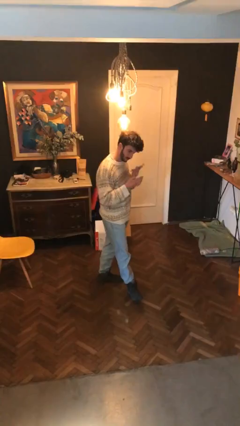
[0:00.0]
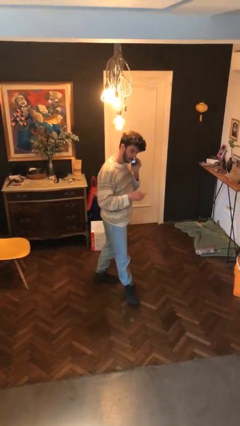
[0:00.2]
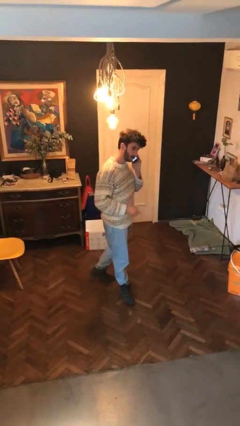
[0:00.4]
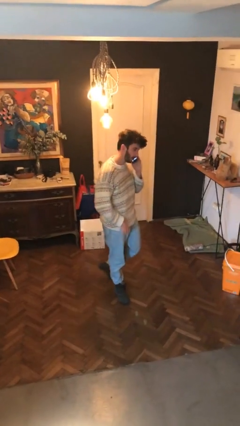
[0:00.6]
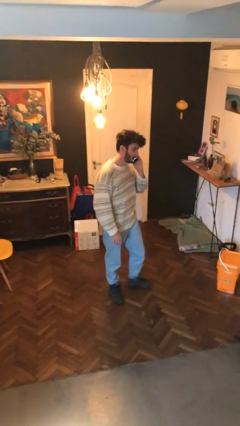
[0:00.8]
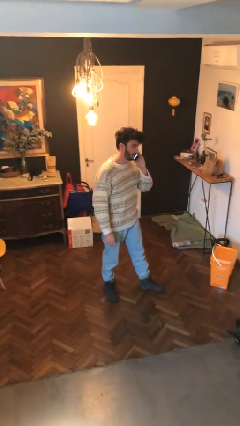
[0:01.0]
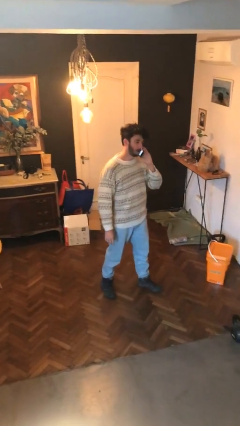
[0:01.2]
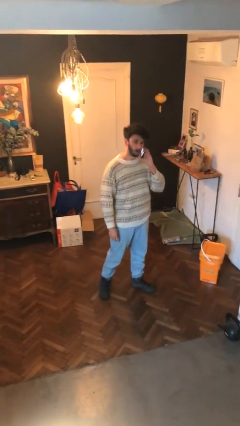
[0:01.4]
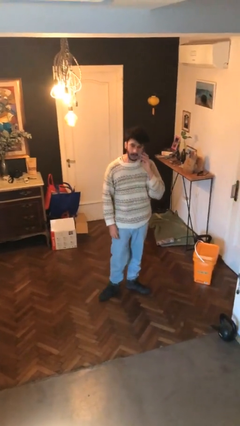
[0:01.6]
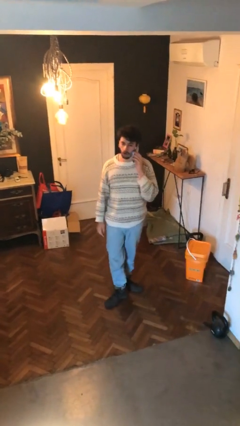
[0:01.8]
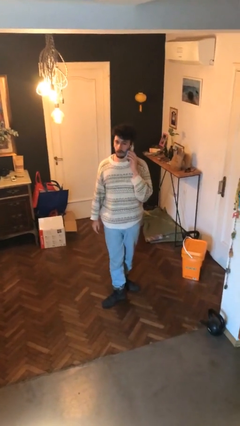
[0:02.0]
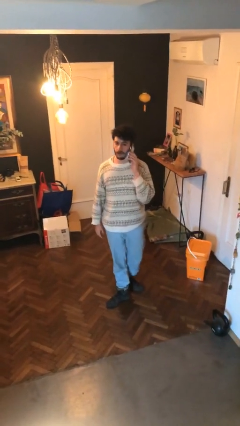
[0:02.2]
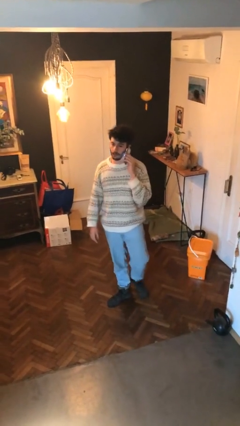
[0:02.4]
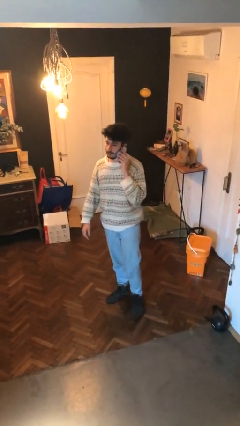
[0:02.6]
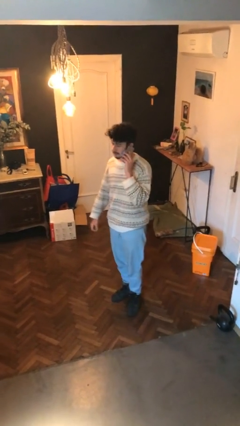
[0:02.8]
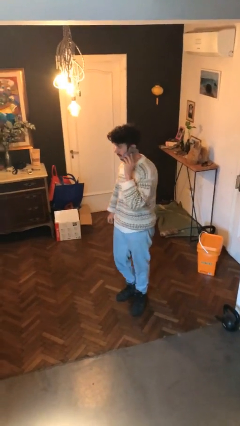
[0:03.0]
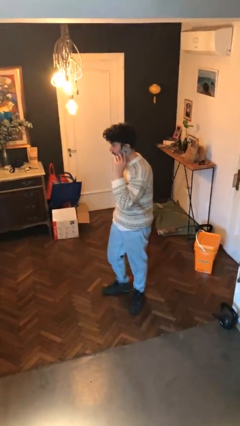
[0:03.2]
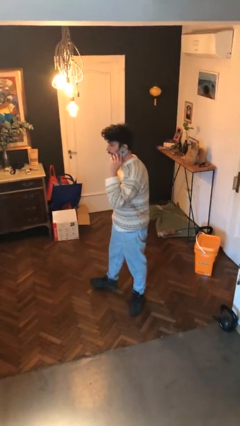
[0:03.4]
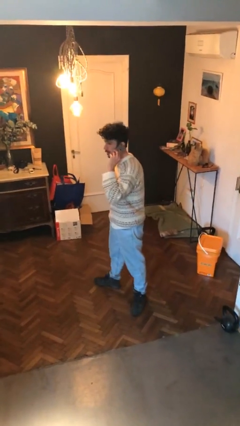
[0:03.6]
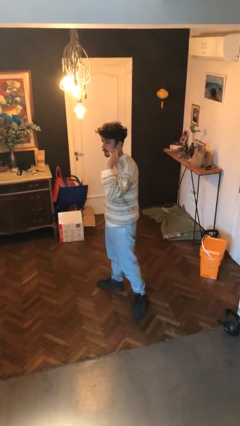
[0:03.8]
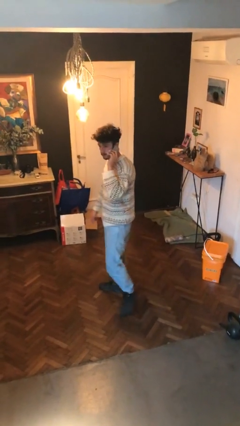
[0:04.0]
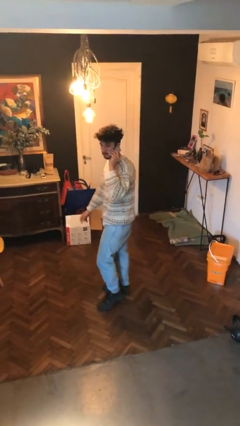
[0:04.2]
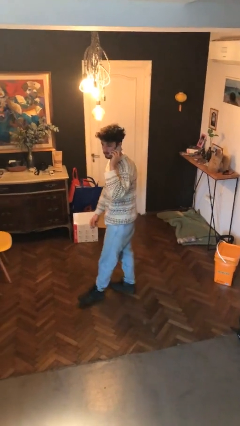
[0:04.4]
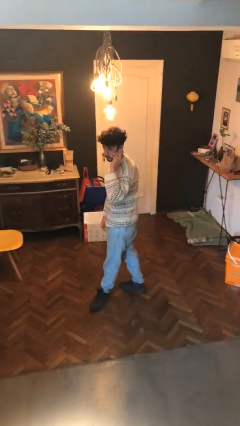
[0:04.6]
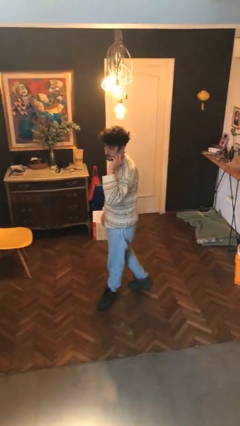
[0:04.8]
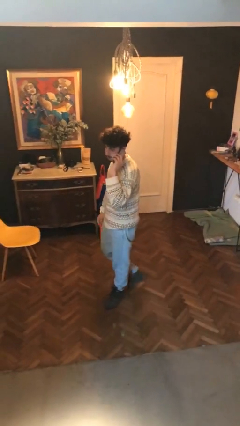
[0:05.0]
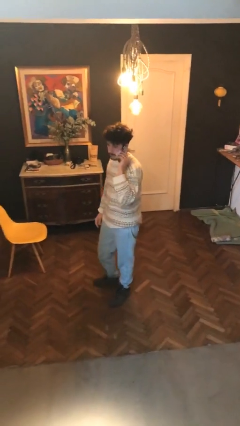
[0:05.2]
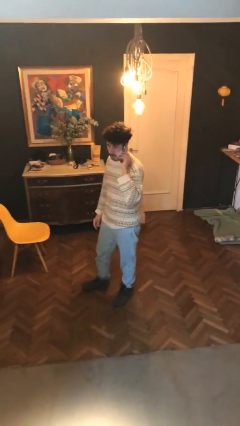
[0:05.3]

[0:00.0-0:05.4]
person talks on phone

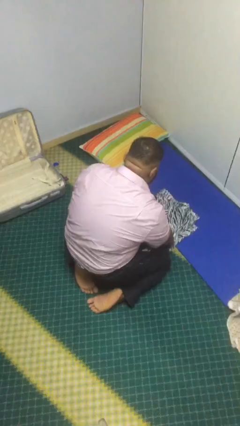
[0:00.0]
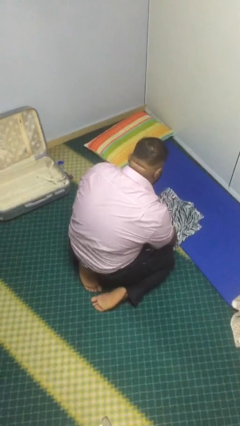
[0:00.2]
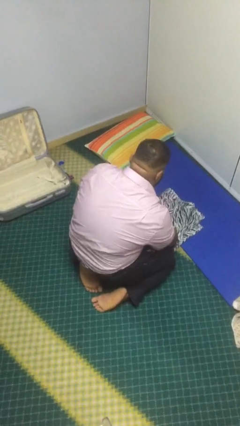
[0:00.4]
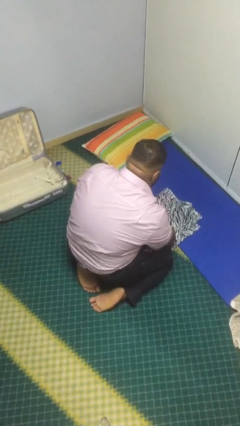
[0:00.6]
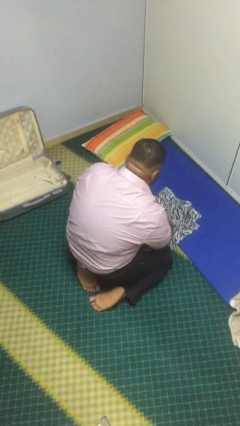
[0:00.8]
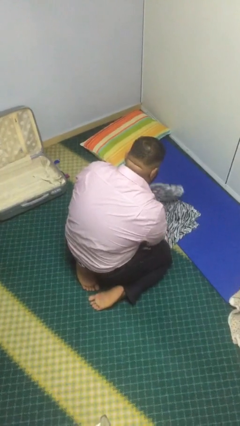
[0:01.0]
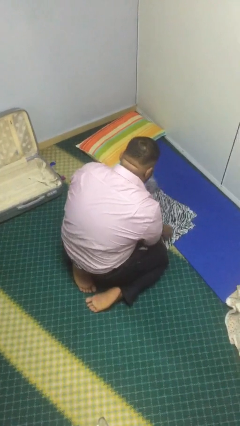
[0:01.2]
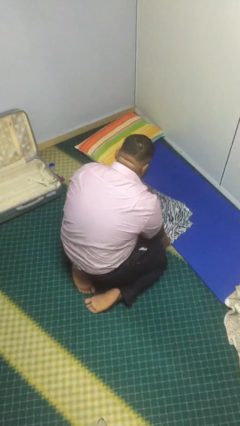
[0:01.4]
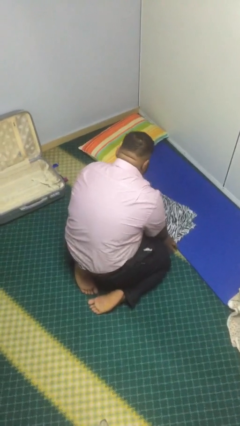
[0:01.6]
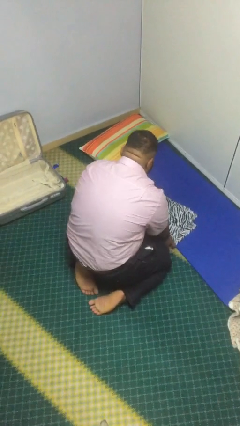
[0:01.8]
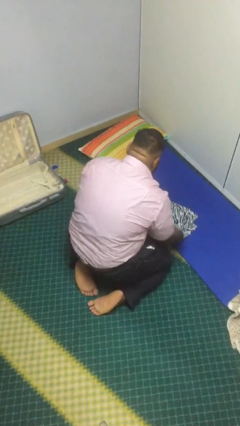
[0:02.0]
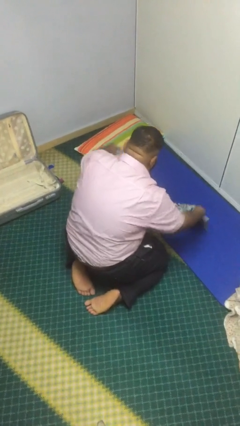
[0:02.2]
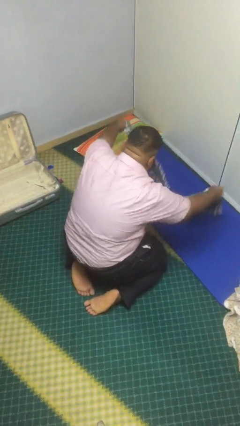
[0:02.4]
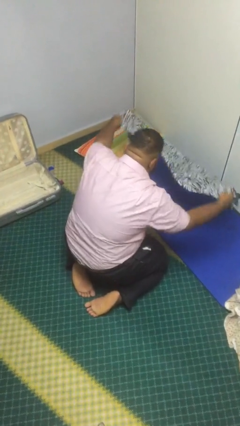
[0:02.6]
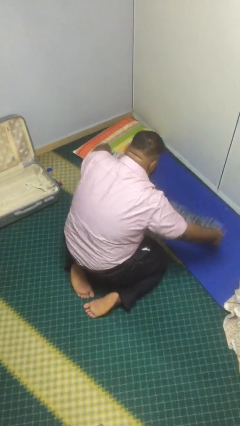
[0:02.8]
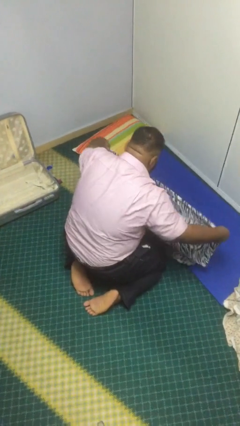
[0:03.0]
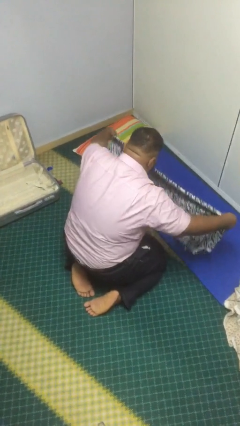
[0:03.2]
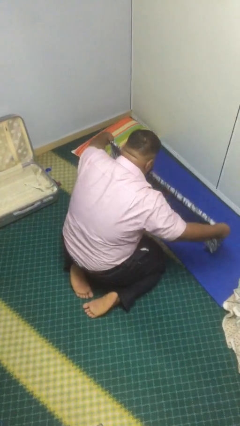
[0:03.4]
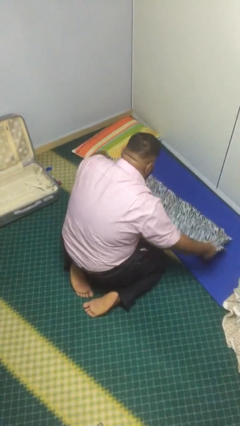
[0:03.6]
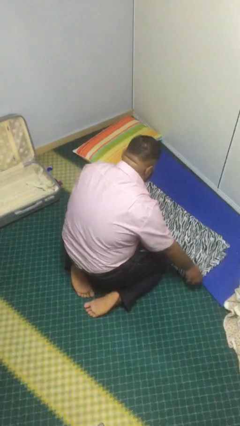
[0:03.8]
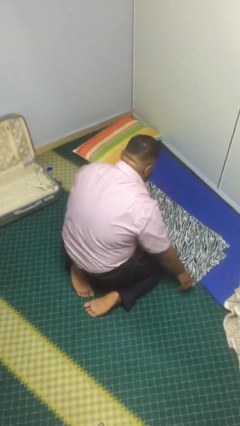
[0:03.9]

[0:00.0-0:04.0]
person unfolds blanket

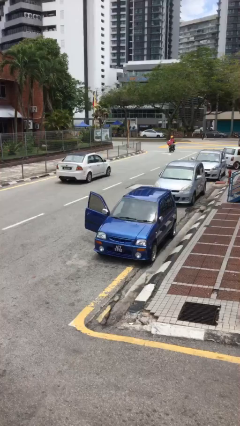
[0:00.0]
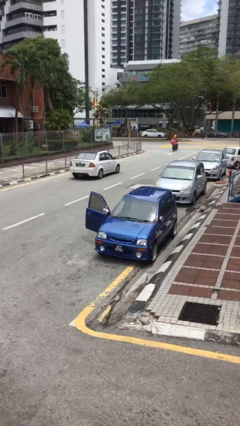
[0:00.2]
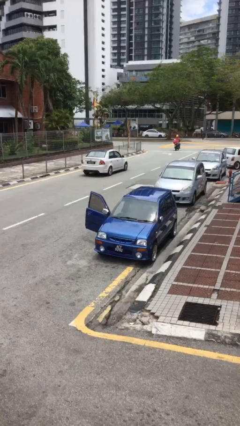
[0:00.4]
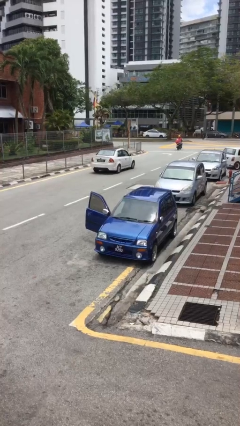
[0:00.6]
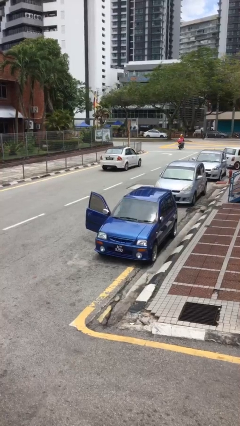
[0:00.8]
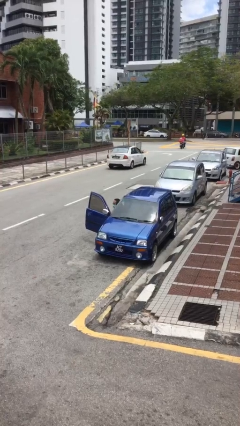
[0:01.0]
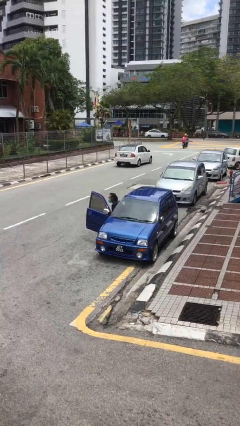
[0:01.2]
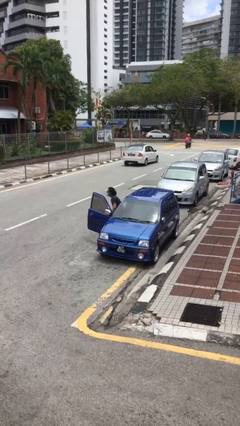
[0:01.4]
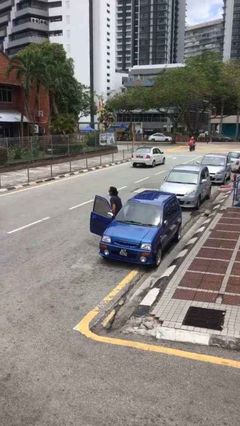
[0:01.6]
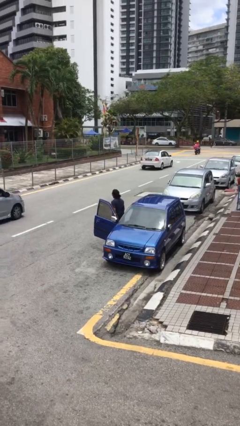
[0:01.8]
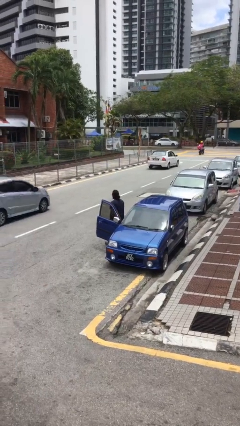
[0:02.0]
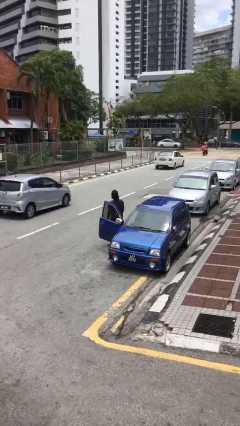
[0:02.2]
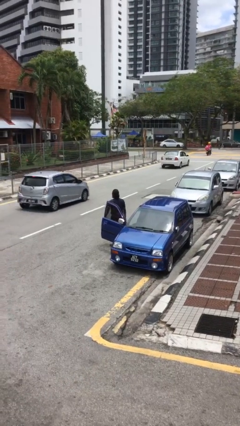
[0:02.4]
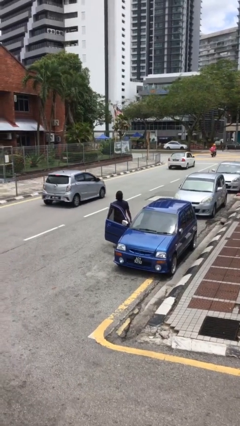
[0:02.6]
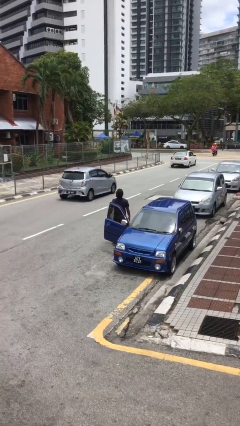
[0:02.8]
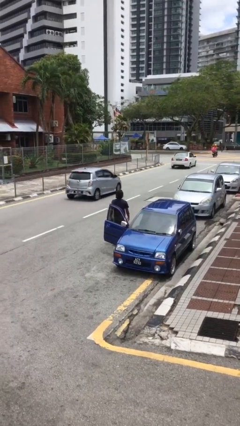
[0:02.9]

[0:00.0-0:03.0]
person exits car

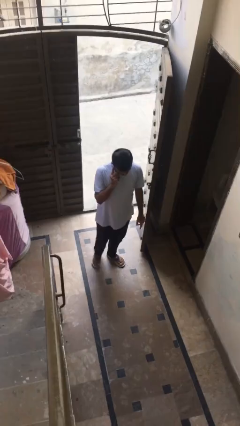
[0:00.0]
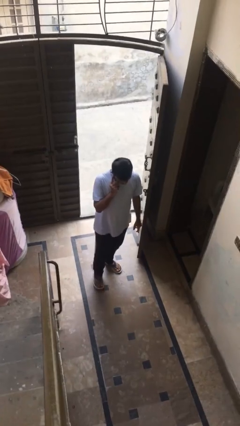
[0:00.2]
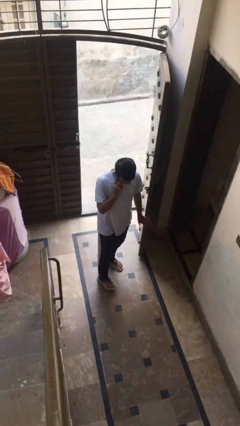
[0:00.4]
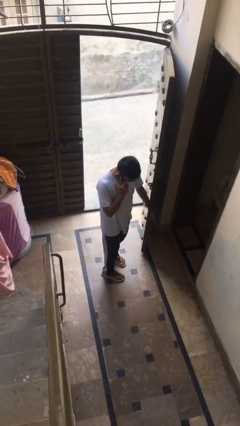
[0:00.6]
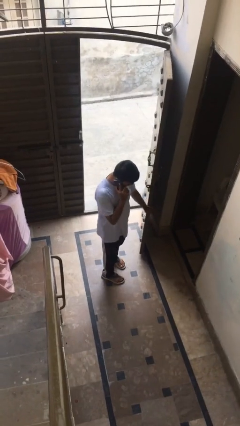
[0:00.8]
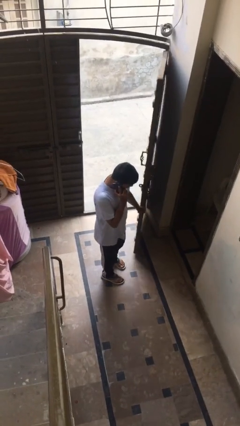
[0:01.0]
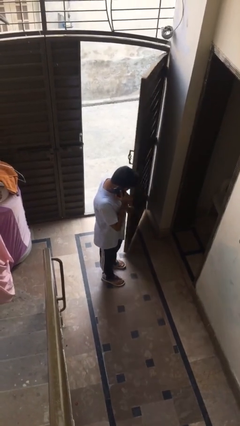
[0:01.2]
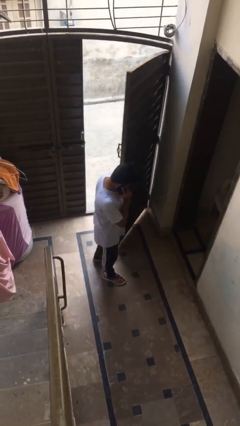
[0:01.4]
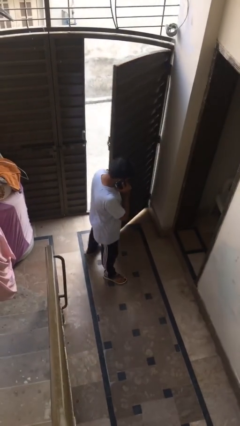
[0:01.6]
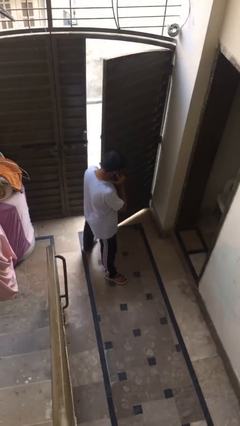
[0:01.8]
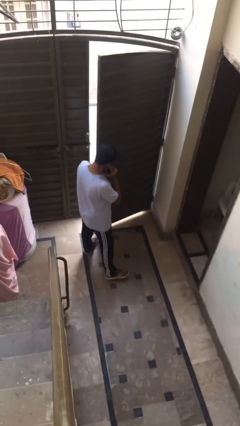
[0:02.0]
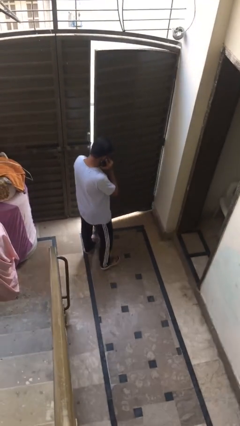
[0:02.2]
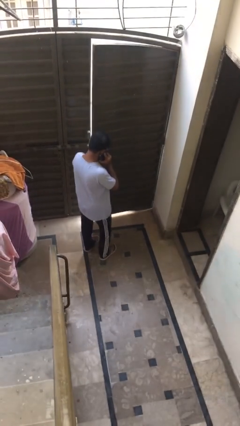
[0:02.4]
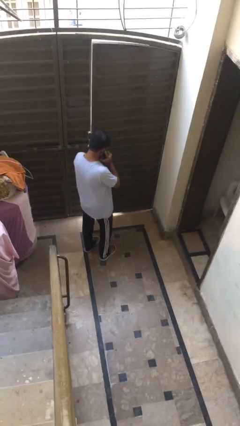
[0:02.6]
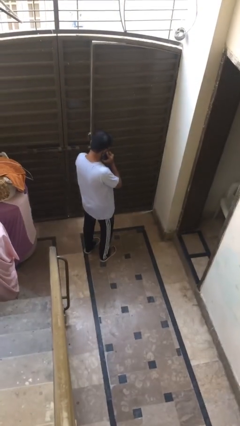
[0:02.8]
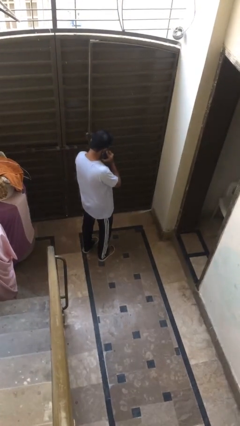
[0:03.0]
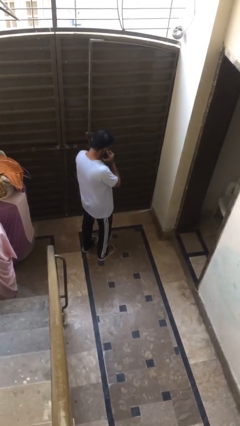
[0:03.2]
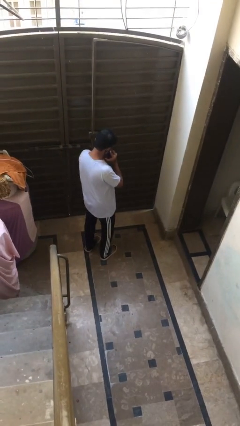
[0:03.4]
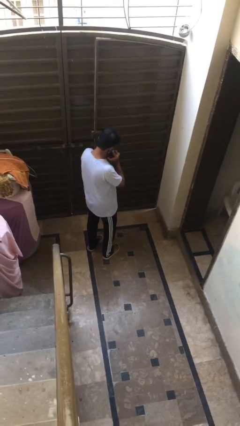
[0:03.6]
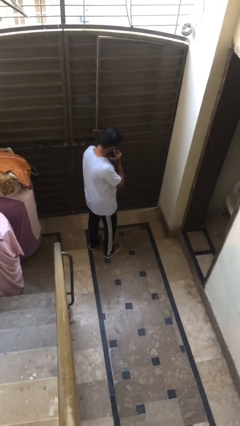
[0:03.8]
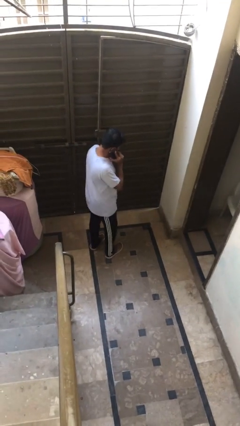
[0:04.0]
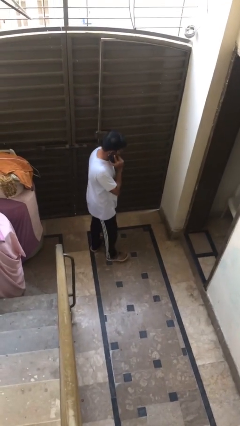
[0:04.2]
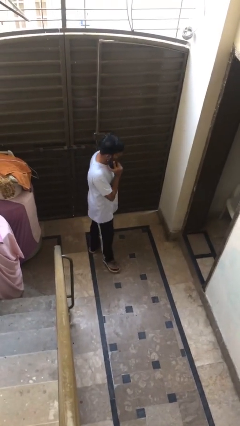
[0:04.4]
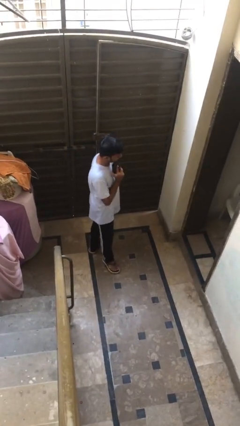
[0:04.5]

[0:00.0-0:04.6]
person closes facility door

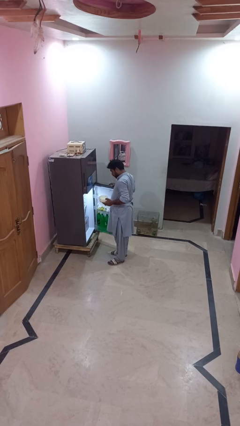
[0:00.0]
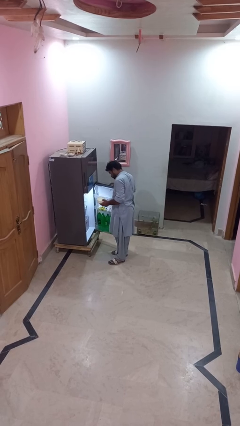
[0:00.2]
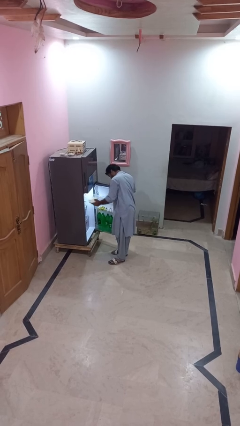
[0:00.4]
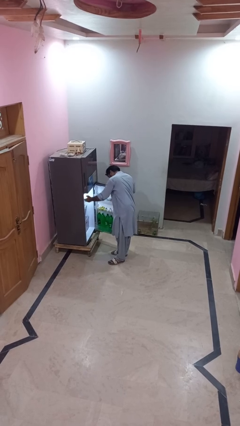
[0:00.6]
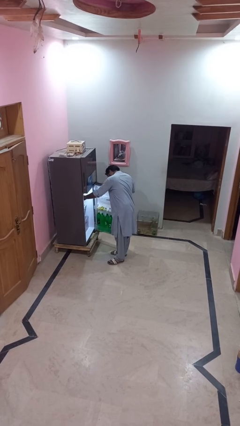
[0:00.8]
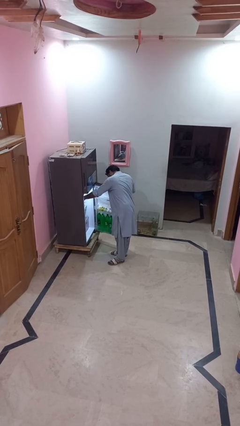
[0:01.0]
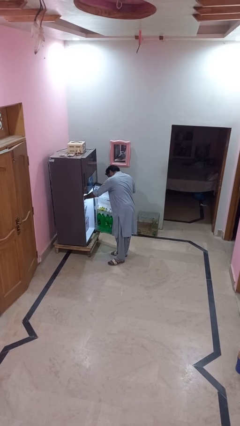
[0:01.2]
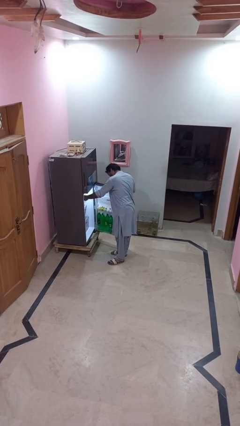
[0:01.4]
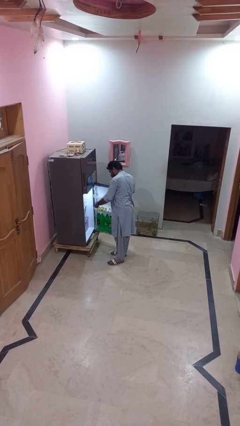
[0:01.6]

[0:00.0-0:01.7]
person puts object into refrigerator
